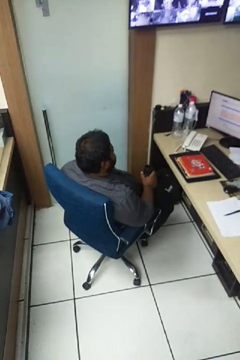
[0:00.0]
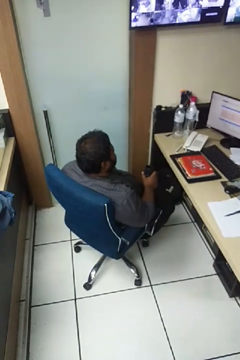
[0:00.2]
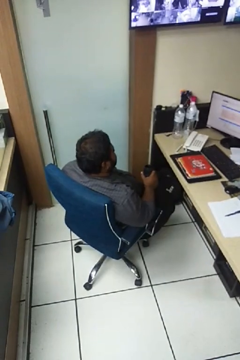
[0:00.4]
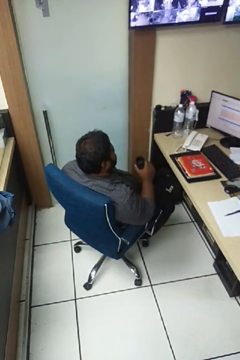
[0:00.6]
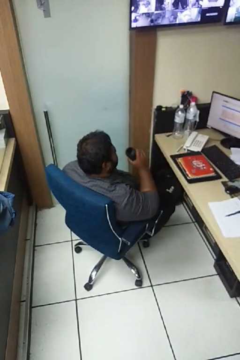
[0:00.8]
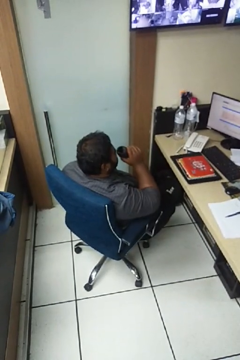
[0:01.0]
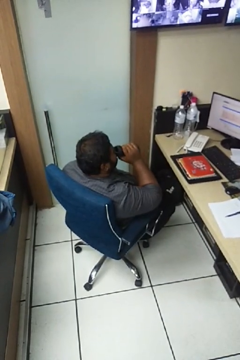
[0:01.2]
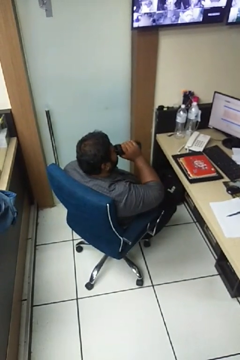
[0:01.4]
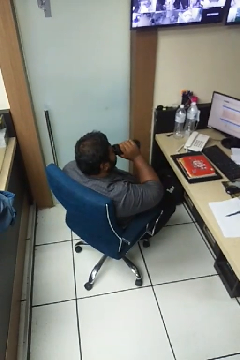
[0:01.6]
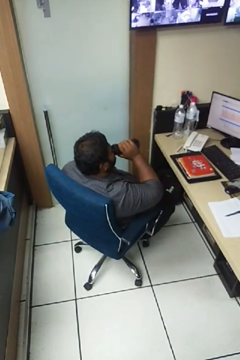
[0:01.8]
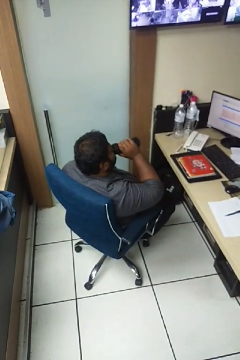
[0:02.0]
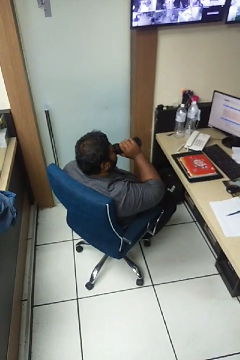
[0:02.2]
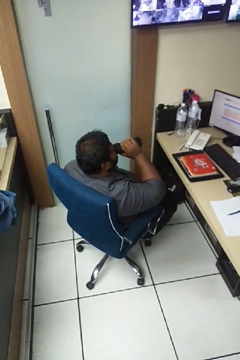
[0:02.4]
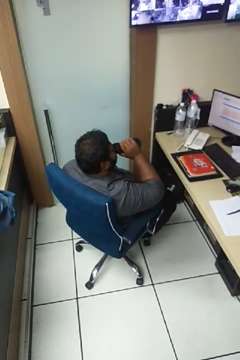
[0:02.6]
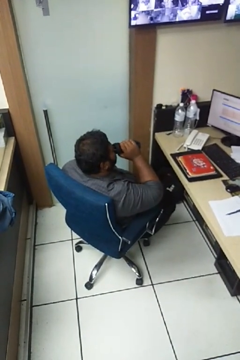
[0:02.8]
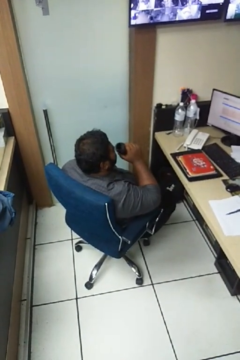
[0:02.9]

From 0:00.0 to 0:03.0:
person drinks from bottle

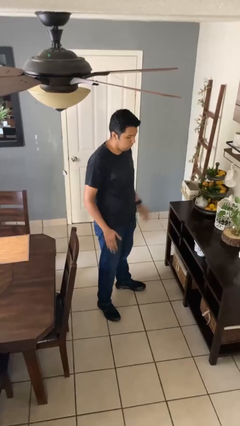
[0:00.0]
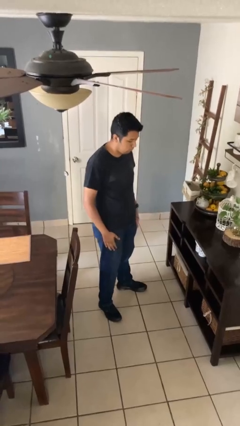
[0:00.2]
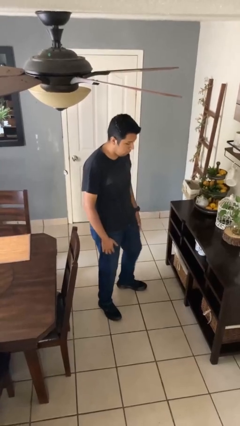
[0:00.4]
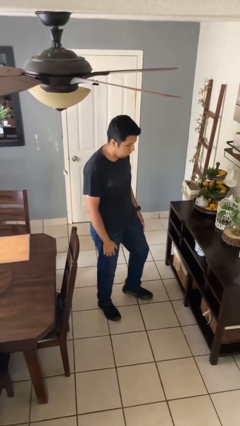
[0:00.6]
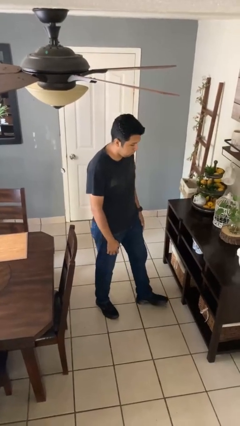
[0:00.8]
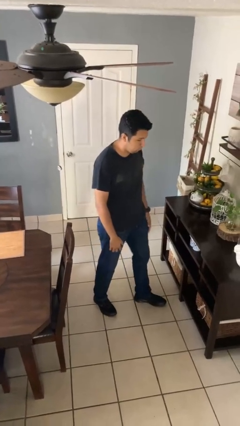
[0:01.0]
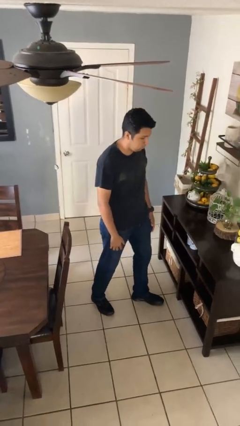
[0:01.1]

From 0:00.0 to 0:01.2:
person slaps hands on thighs

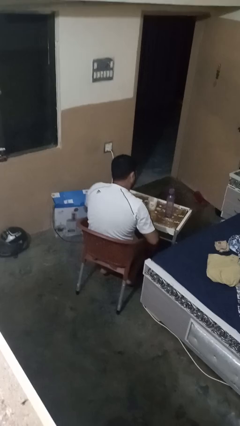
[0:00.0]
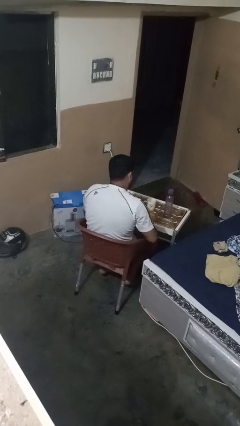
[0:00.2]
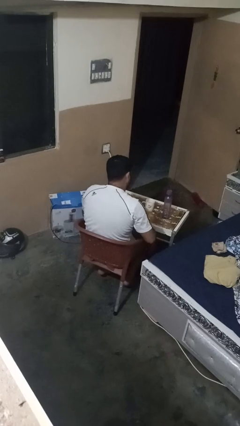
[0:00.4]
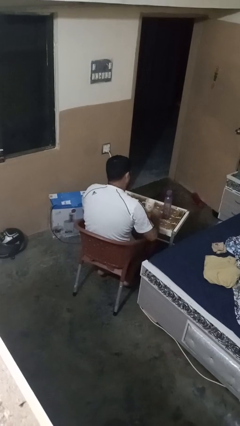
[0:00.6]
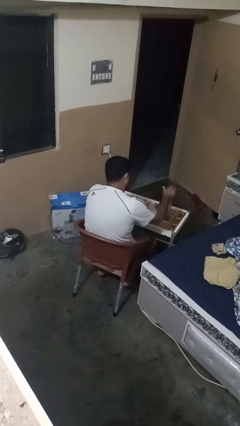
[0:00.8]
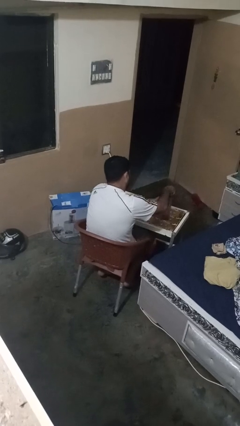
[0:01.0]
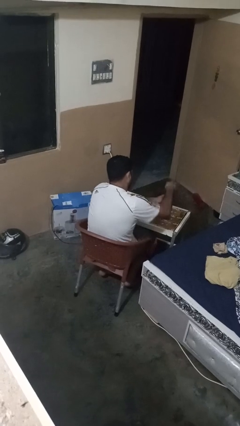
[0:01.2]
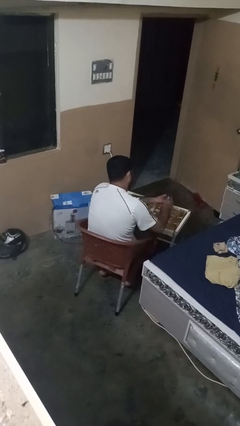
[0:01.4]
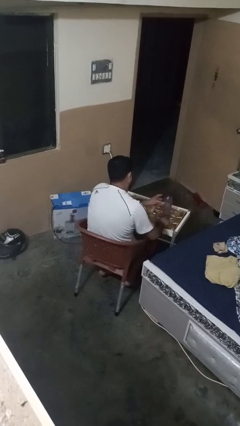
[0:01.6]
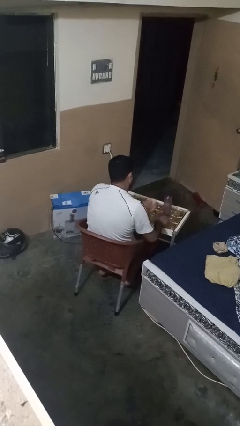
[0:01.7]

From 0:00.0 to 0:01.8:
person unscrews lid from bottle

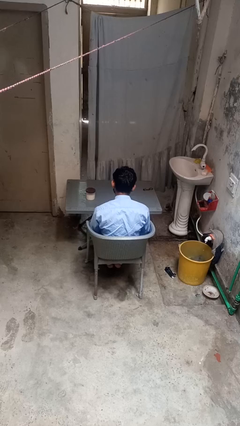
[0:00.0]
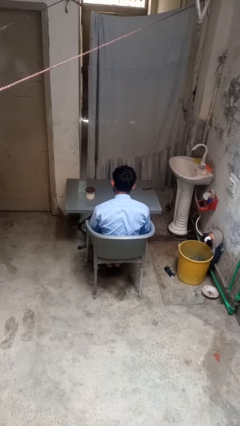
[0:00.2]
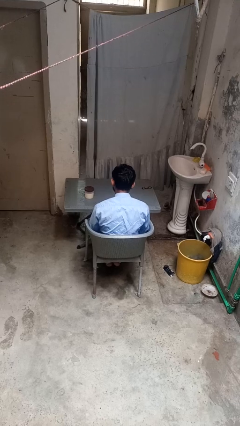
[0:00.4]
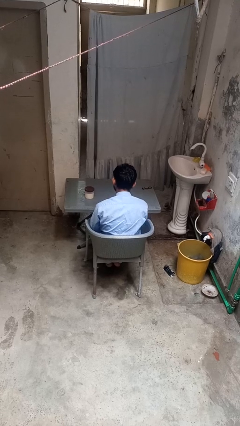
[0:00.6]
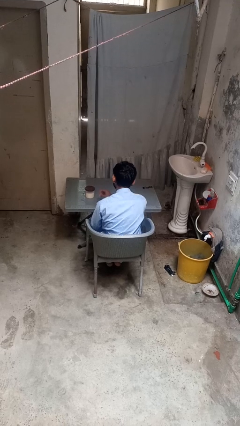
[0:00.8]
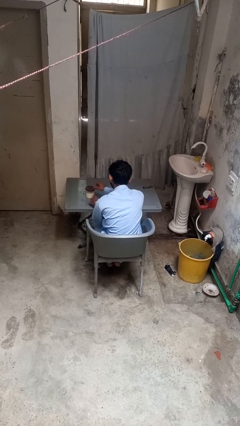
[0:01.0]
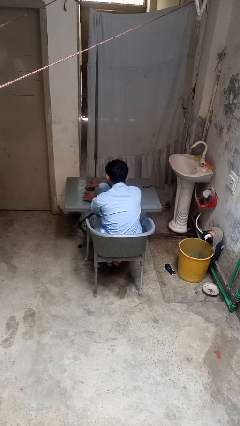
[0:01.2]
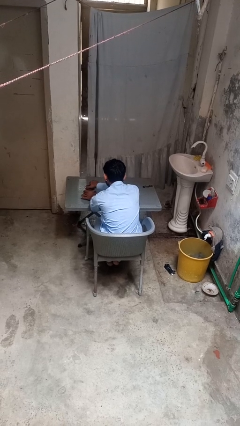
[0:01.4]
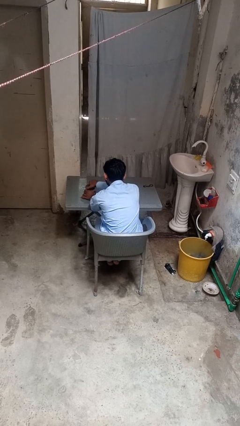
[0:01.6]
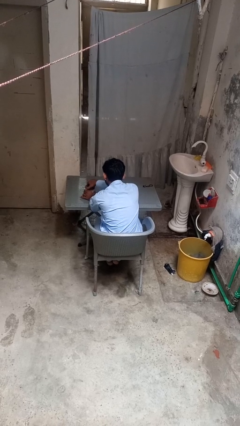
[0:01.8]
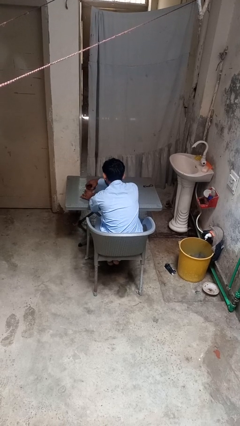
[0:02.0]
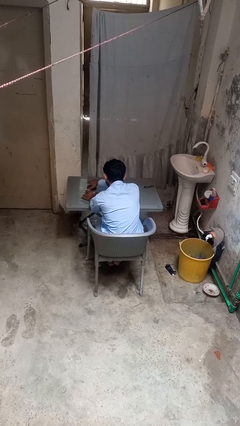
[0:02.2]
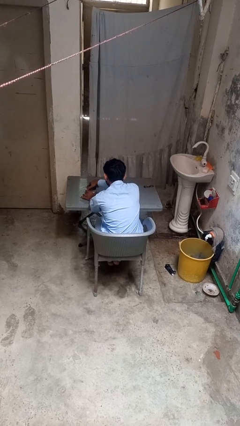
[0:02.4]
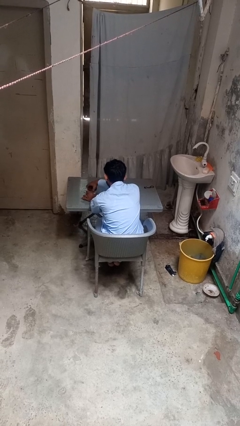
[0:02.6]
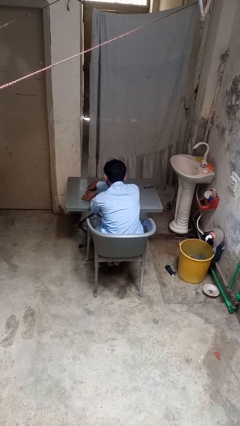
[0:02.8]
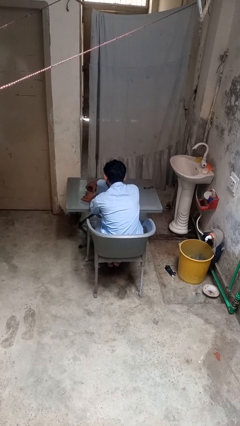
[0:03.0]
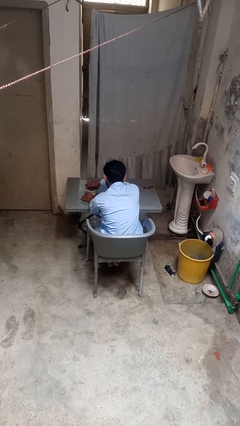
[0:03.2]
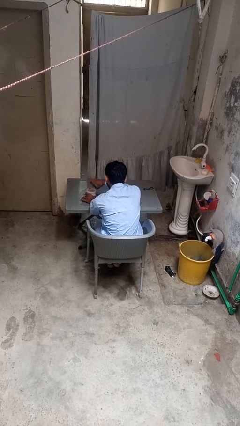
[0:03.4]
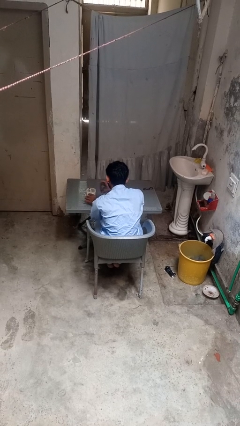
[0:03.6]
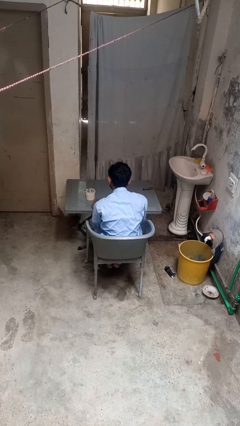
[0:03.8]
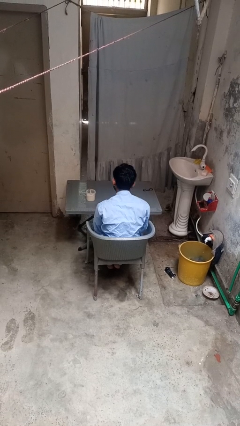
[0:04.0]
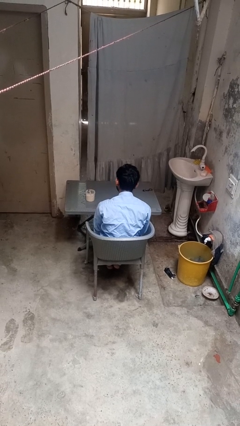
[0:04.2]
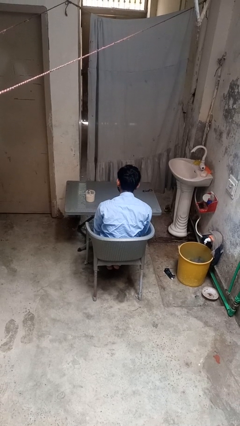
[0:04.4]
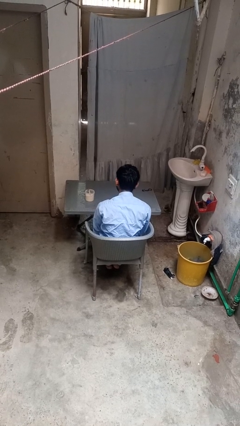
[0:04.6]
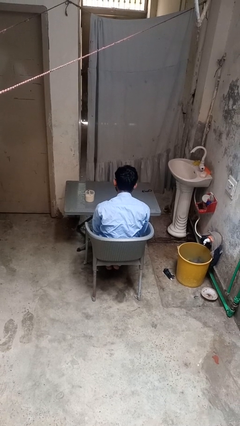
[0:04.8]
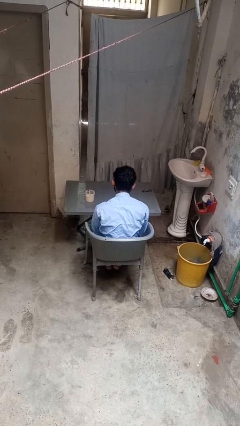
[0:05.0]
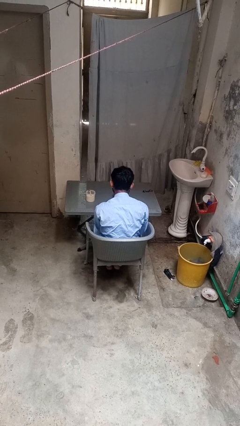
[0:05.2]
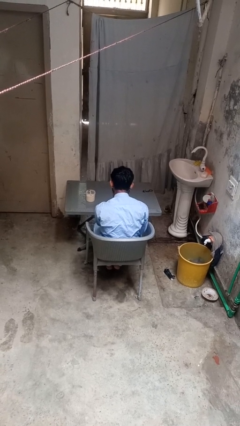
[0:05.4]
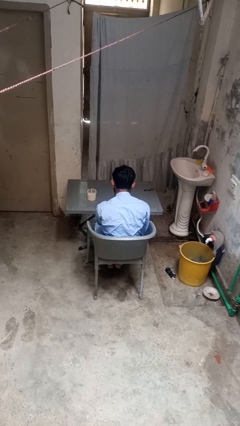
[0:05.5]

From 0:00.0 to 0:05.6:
person opens jar

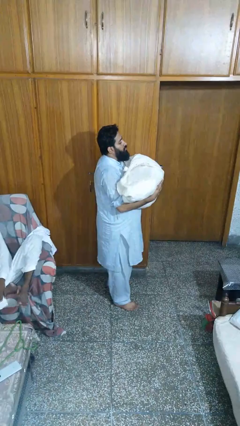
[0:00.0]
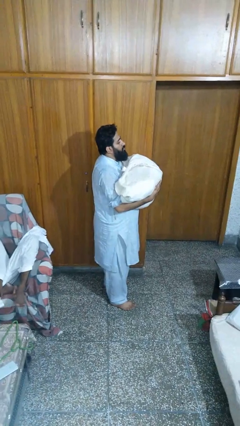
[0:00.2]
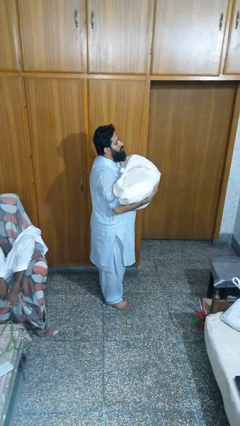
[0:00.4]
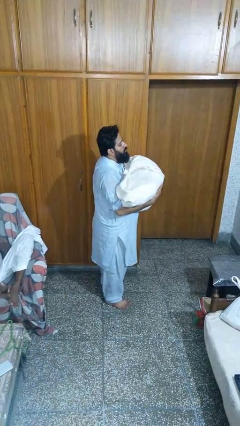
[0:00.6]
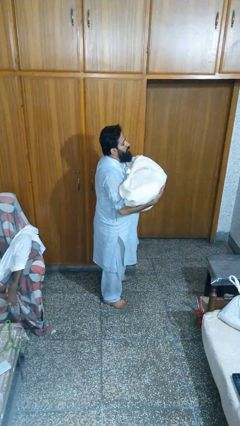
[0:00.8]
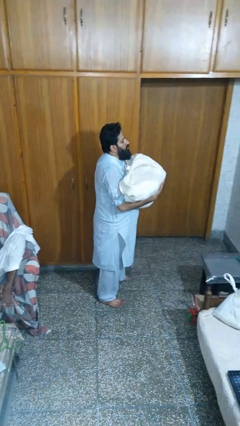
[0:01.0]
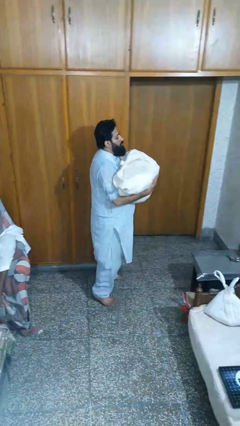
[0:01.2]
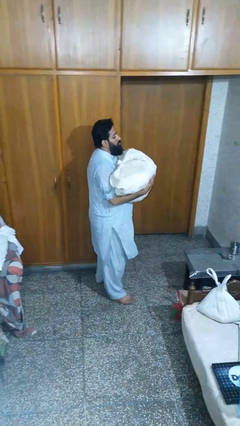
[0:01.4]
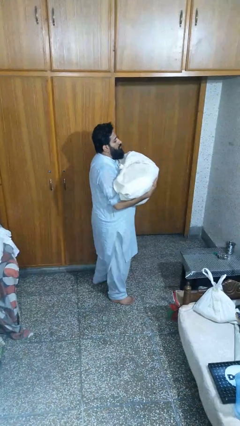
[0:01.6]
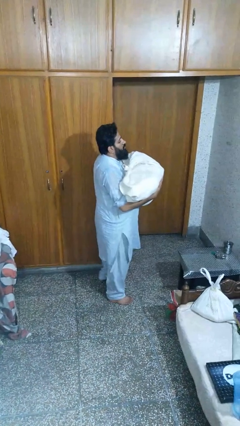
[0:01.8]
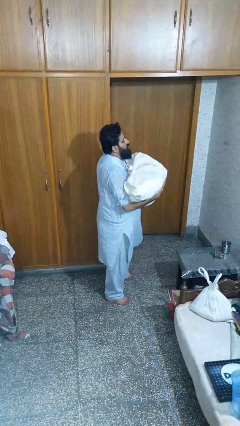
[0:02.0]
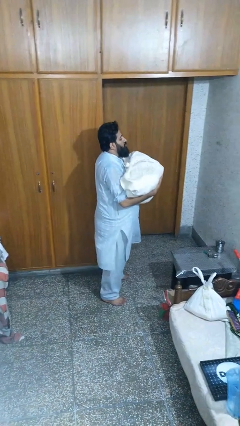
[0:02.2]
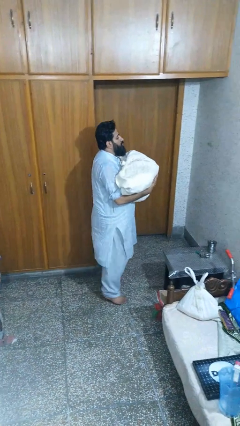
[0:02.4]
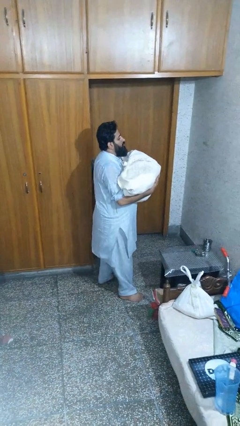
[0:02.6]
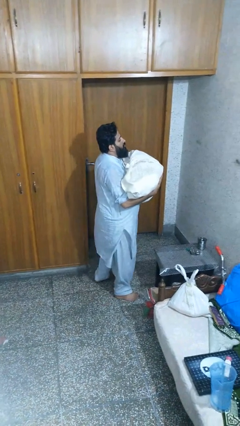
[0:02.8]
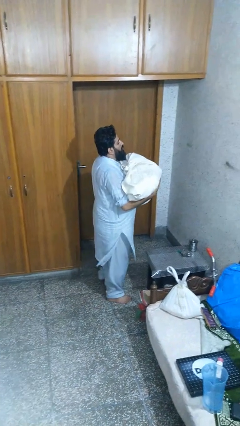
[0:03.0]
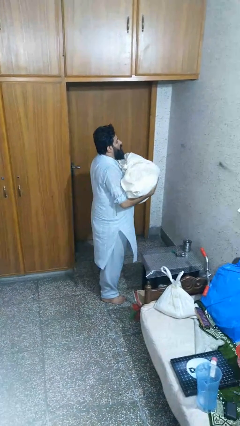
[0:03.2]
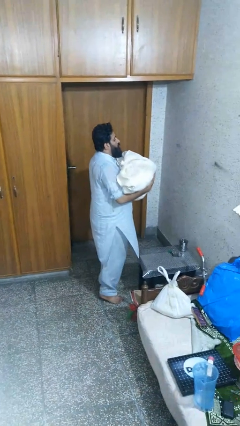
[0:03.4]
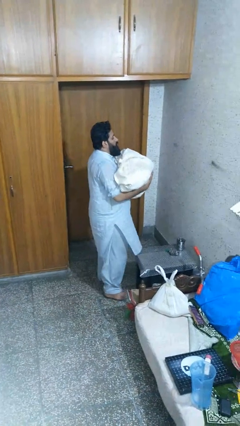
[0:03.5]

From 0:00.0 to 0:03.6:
person carries laundry basket

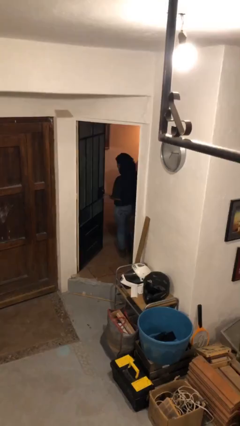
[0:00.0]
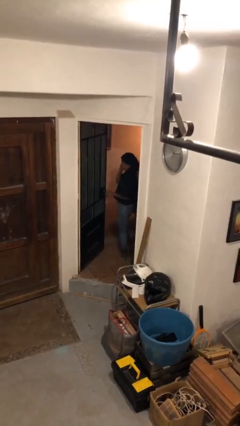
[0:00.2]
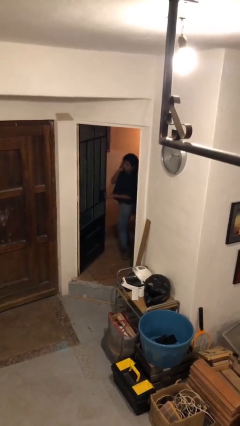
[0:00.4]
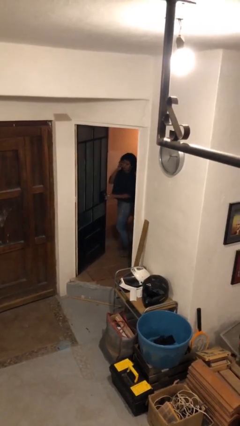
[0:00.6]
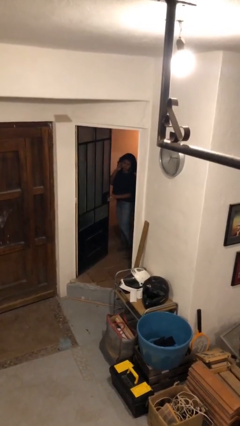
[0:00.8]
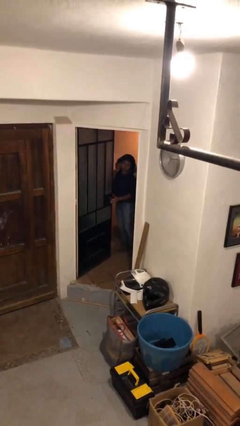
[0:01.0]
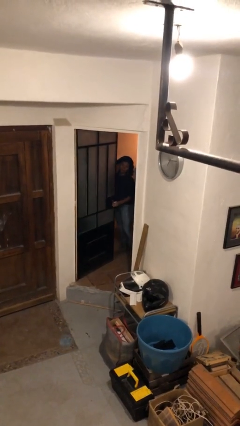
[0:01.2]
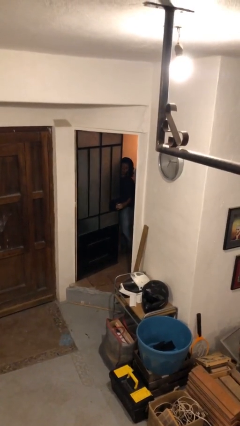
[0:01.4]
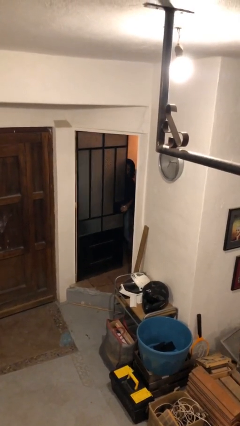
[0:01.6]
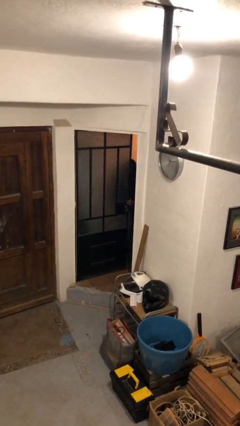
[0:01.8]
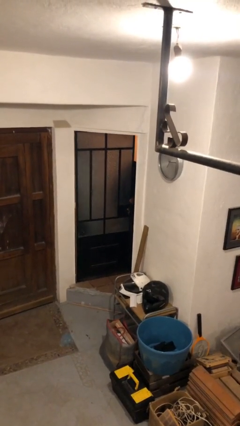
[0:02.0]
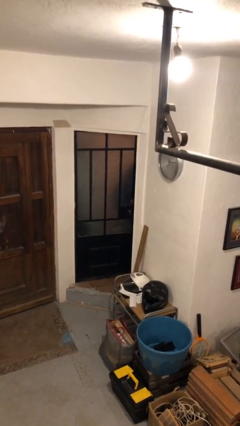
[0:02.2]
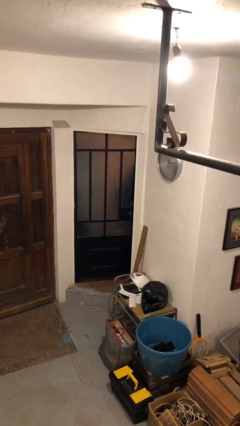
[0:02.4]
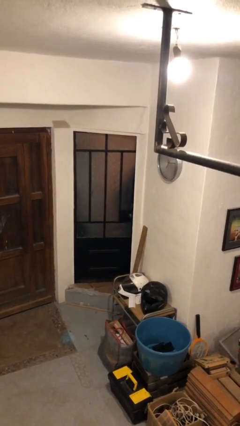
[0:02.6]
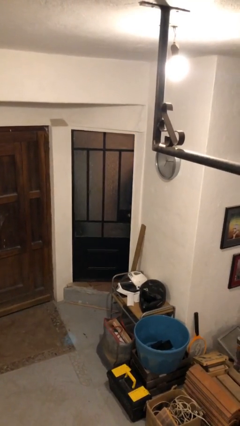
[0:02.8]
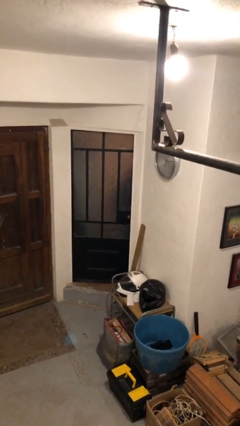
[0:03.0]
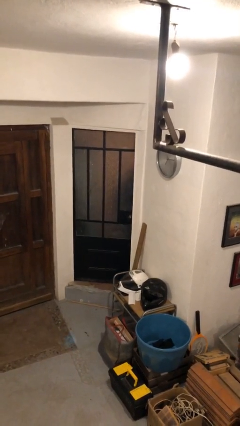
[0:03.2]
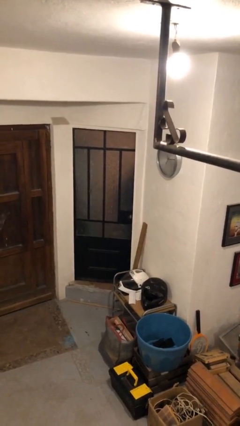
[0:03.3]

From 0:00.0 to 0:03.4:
person closes facility door
